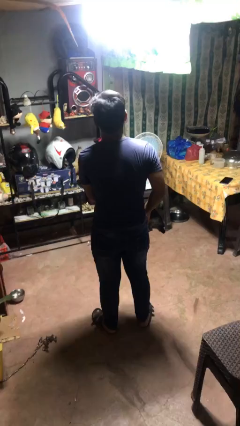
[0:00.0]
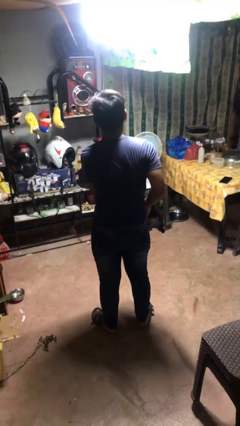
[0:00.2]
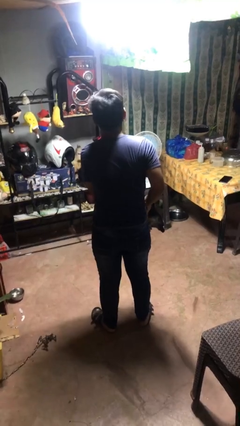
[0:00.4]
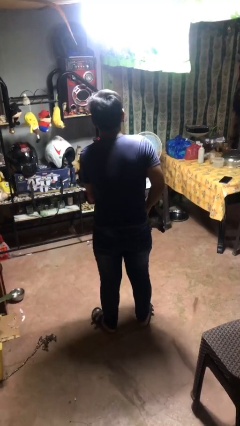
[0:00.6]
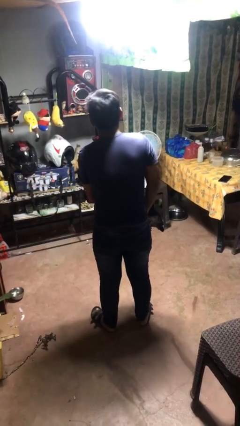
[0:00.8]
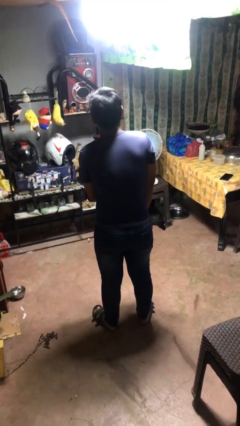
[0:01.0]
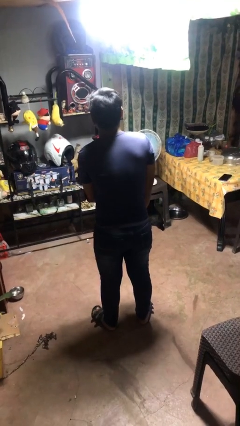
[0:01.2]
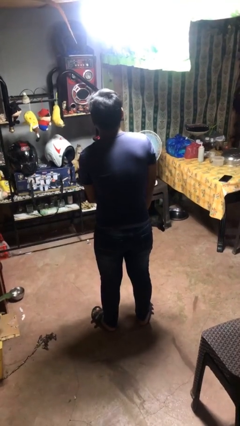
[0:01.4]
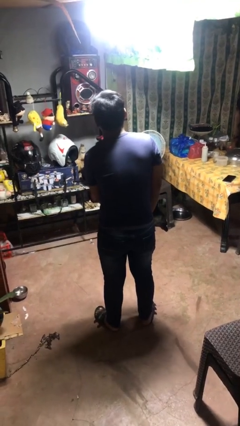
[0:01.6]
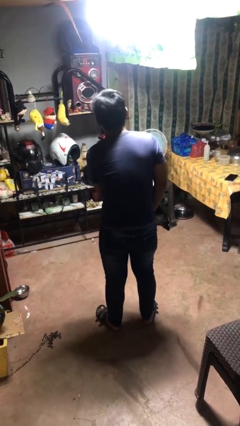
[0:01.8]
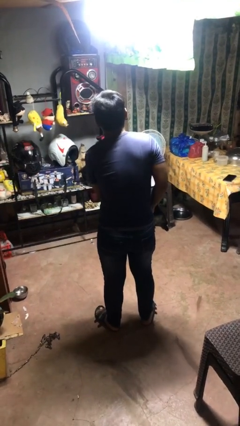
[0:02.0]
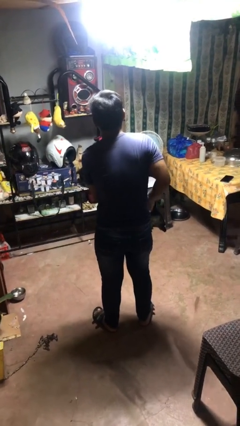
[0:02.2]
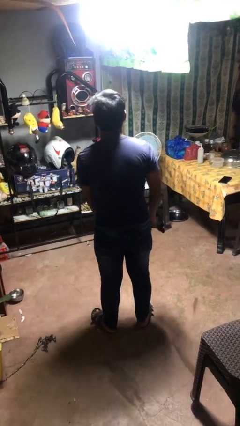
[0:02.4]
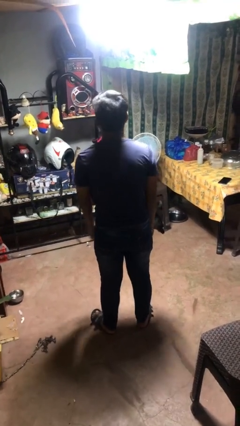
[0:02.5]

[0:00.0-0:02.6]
person puts hands in back pockets

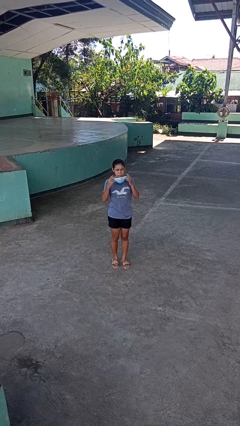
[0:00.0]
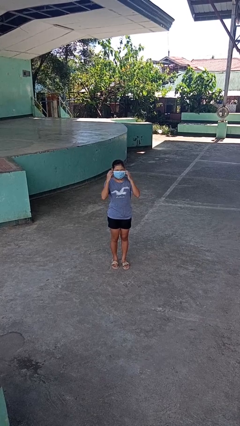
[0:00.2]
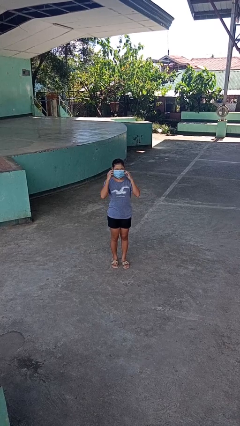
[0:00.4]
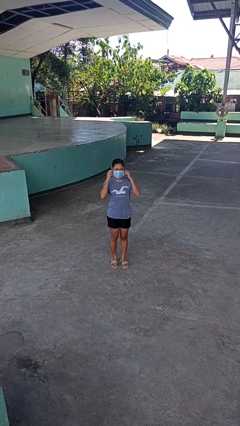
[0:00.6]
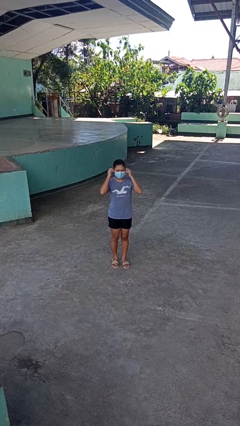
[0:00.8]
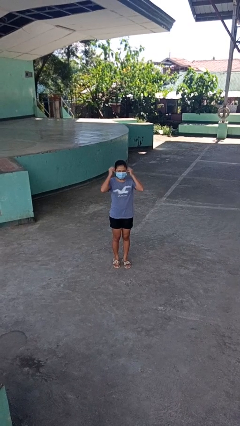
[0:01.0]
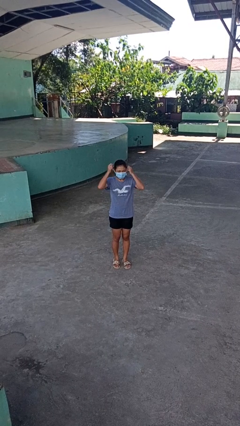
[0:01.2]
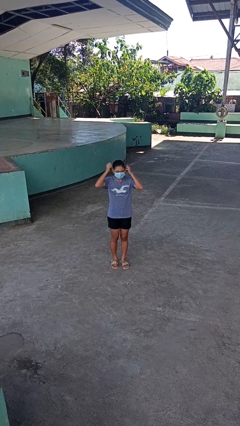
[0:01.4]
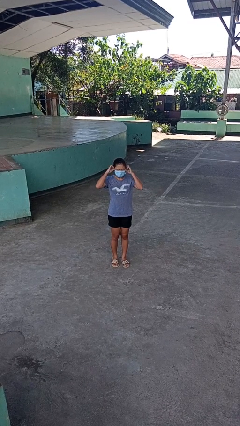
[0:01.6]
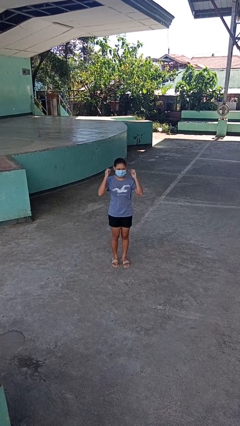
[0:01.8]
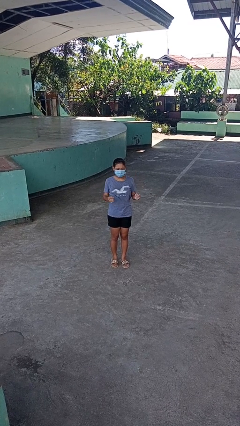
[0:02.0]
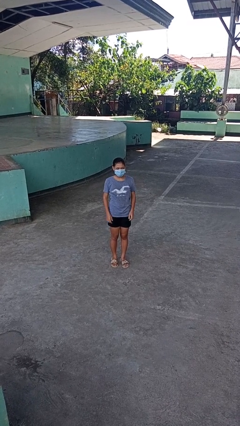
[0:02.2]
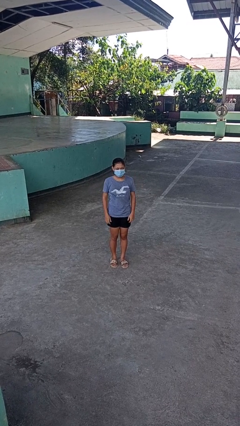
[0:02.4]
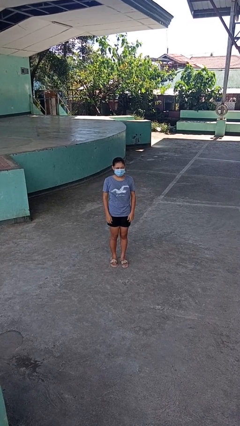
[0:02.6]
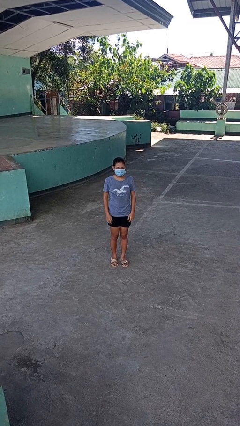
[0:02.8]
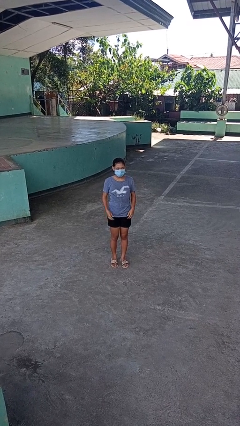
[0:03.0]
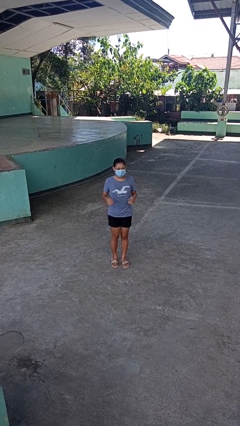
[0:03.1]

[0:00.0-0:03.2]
person puts on facemask

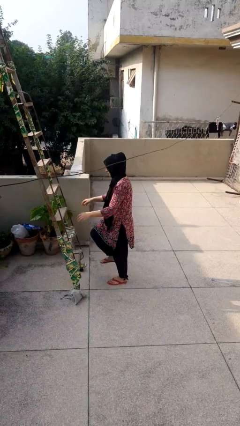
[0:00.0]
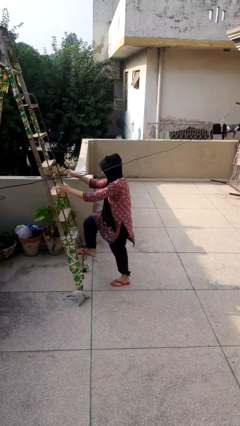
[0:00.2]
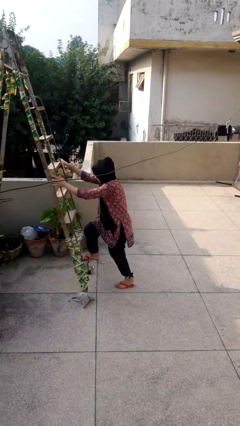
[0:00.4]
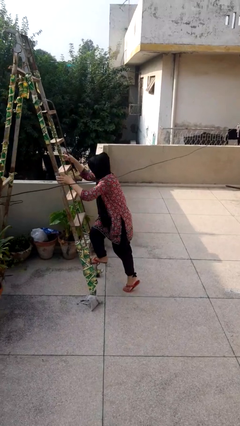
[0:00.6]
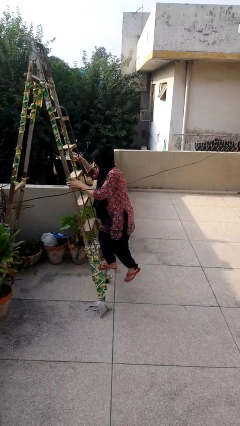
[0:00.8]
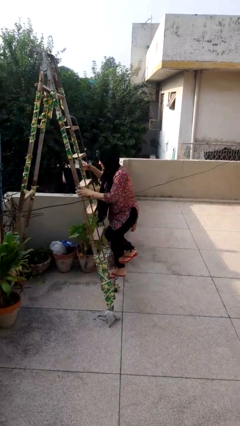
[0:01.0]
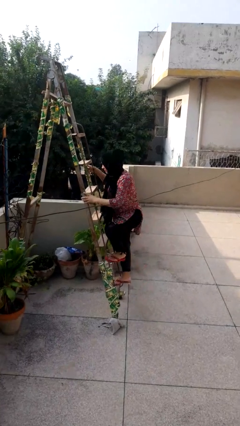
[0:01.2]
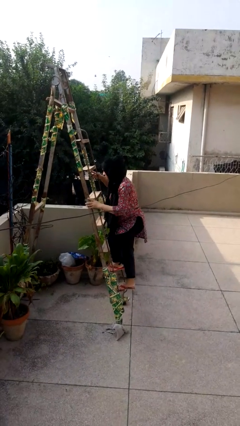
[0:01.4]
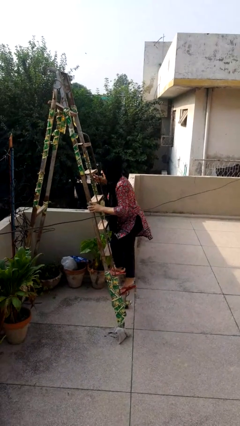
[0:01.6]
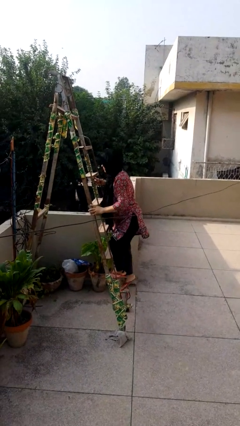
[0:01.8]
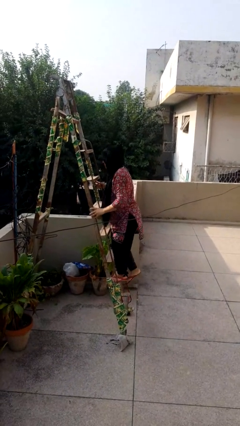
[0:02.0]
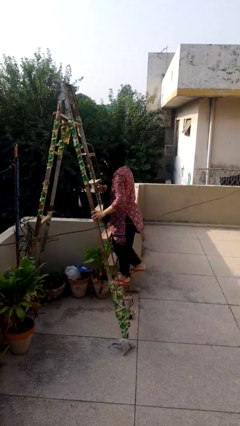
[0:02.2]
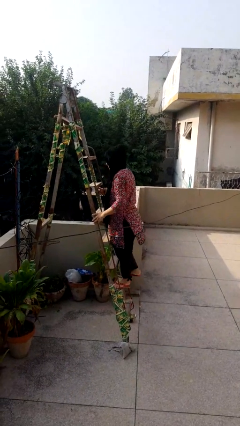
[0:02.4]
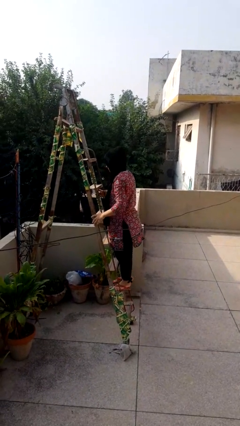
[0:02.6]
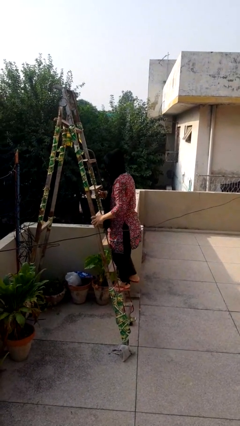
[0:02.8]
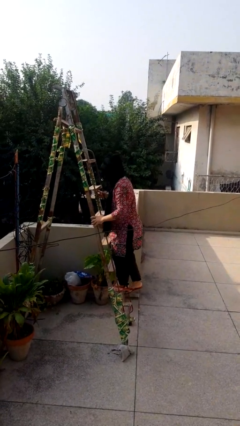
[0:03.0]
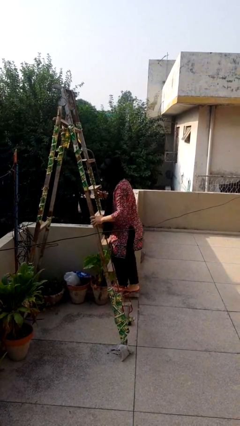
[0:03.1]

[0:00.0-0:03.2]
person climbs up ladder

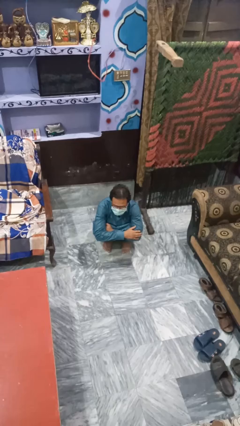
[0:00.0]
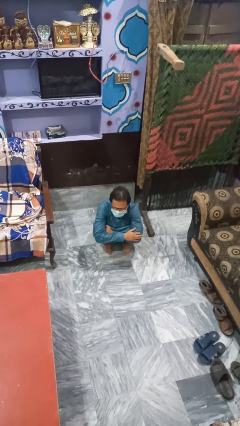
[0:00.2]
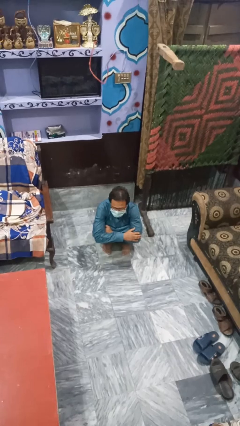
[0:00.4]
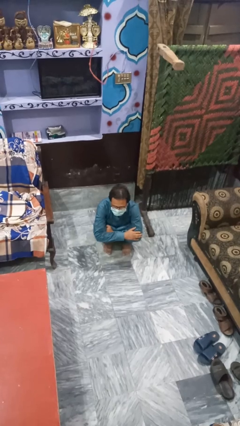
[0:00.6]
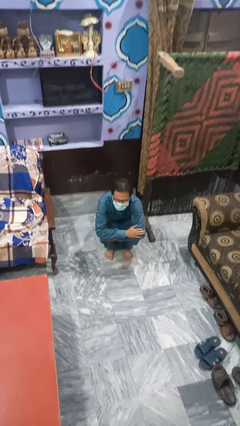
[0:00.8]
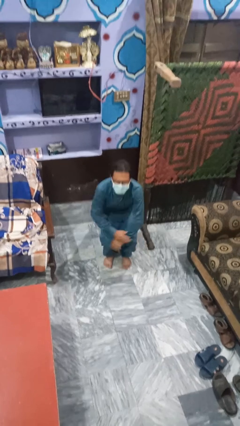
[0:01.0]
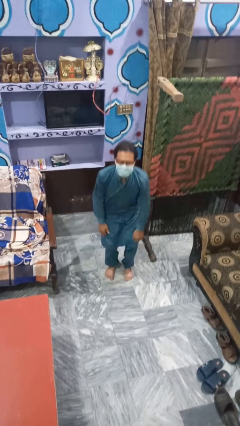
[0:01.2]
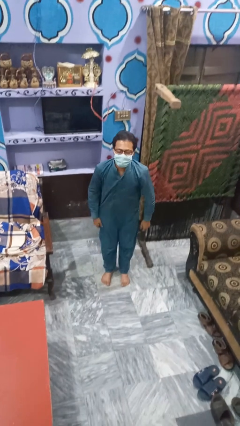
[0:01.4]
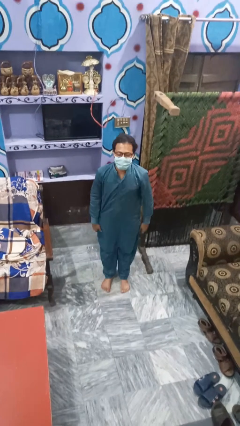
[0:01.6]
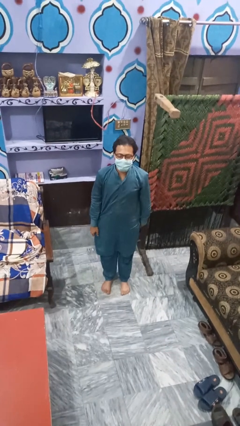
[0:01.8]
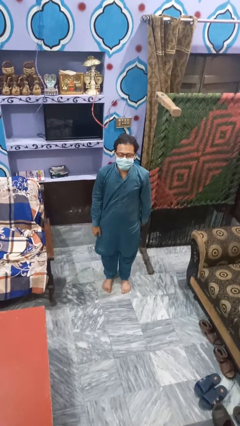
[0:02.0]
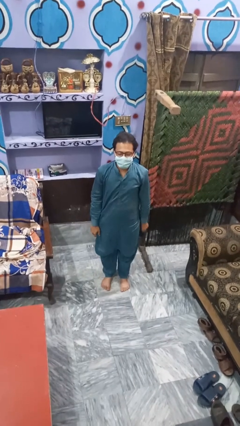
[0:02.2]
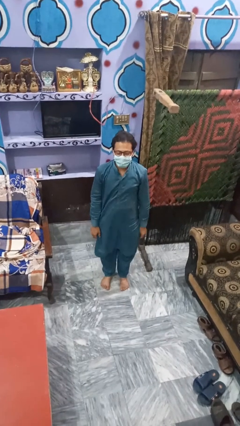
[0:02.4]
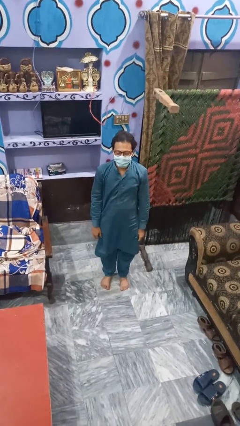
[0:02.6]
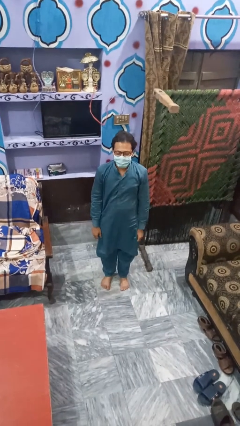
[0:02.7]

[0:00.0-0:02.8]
person stands up

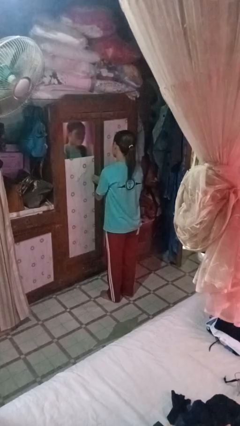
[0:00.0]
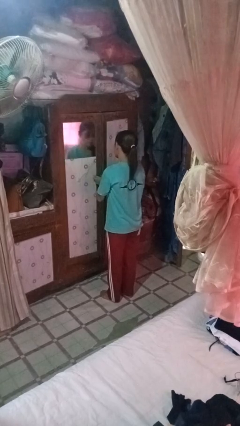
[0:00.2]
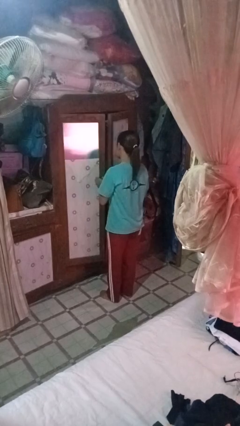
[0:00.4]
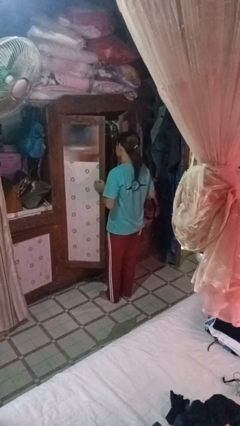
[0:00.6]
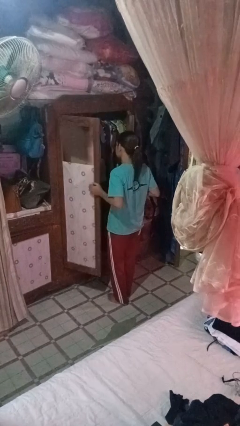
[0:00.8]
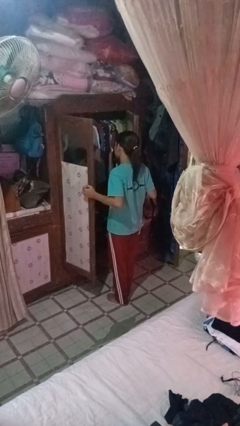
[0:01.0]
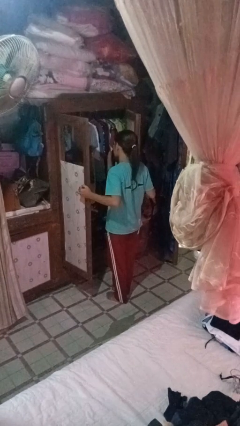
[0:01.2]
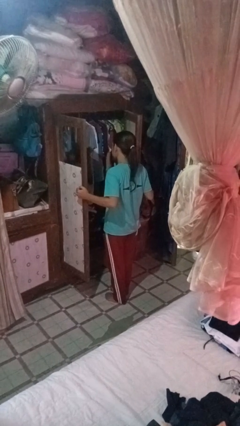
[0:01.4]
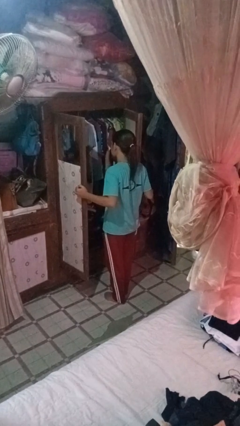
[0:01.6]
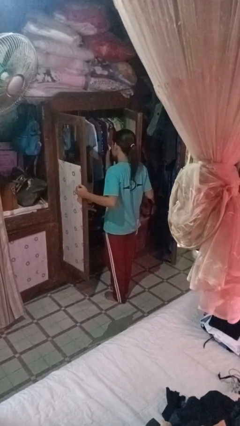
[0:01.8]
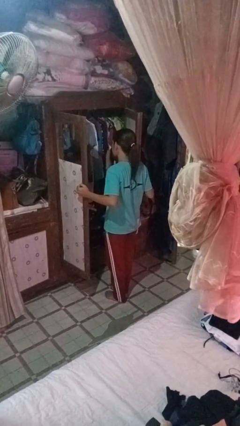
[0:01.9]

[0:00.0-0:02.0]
person opens closet door

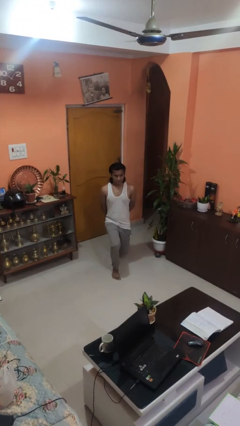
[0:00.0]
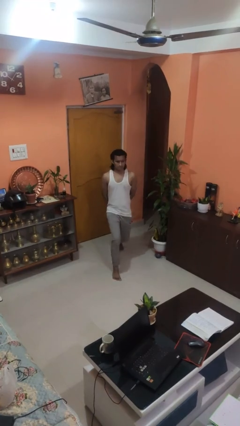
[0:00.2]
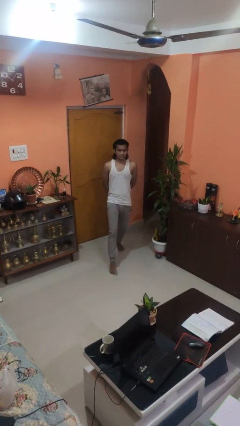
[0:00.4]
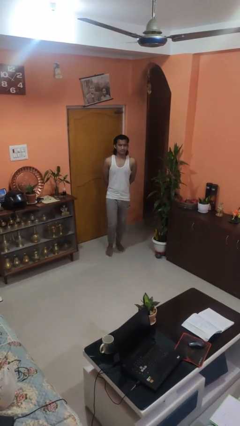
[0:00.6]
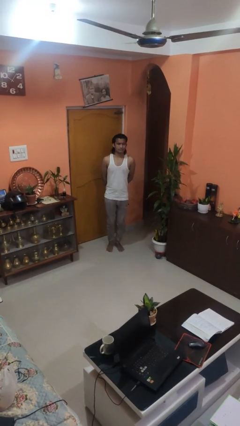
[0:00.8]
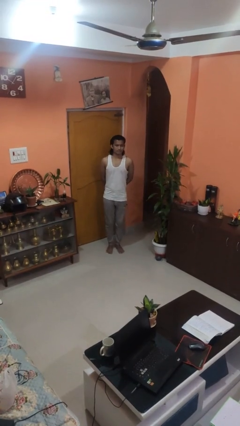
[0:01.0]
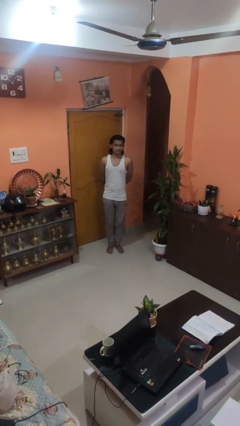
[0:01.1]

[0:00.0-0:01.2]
person stands up from floor

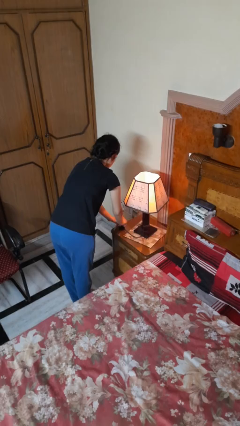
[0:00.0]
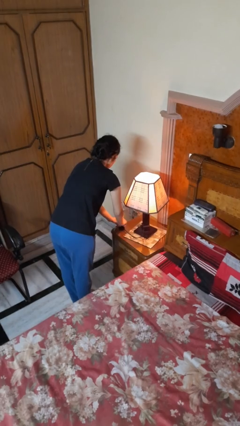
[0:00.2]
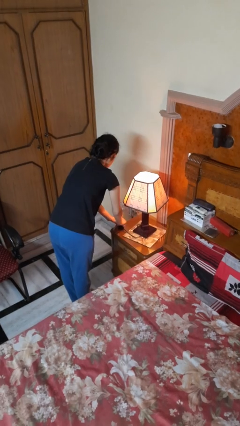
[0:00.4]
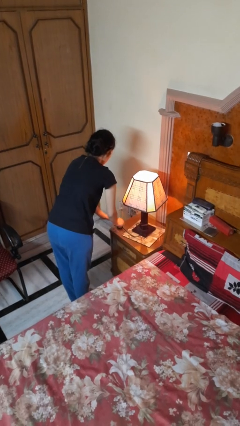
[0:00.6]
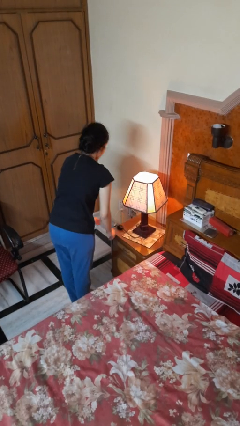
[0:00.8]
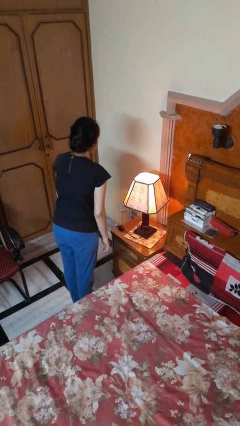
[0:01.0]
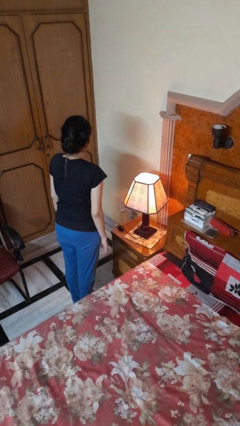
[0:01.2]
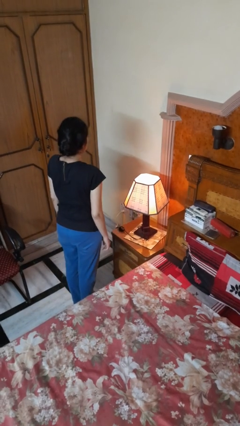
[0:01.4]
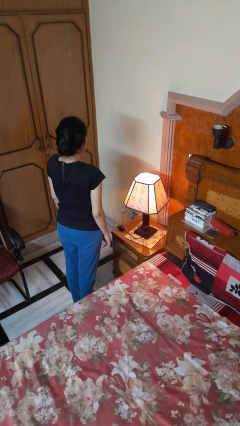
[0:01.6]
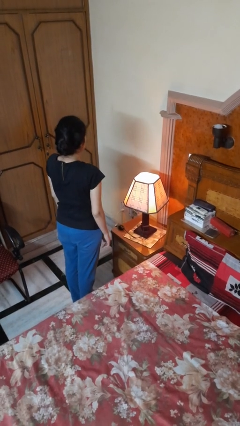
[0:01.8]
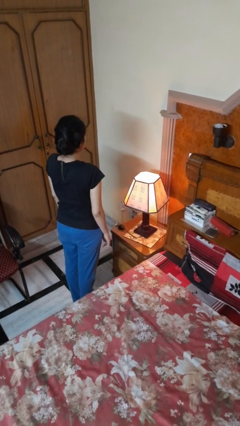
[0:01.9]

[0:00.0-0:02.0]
person turns on lamp

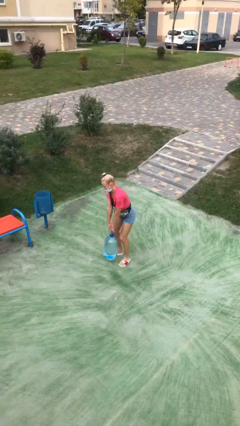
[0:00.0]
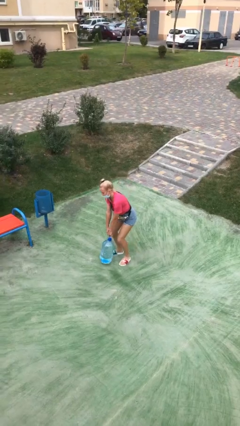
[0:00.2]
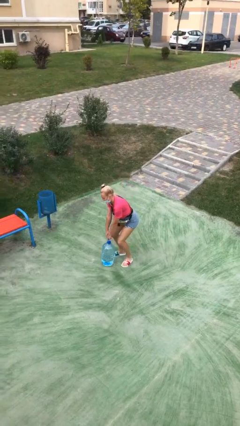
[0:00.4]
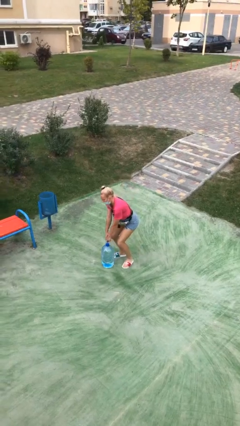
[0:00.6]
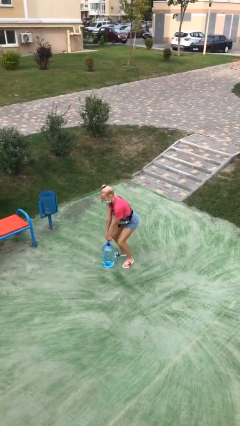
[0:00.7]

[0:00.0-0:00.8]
person puts down object on floor
